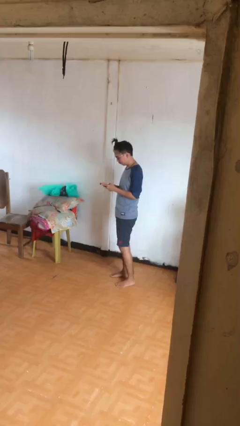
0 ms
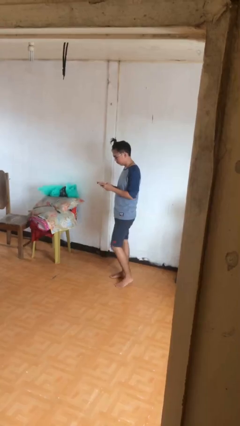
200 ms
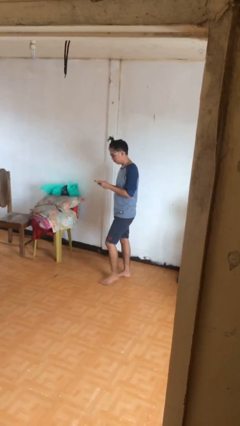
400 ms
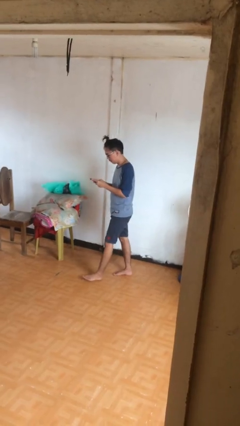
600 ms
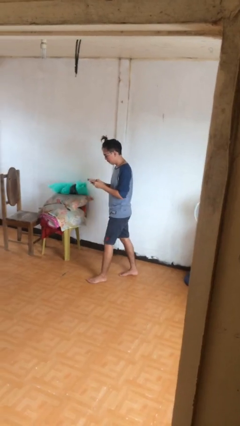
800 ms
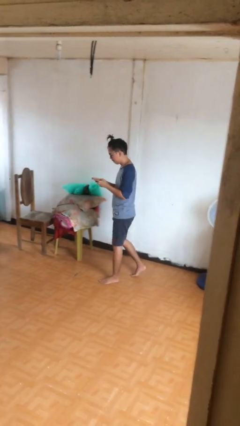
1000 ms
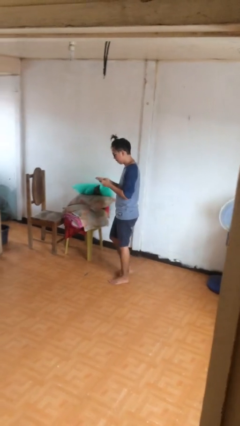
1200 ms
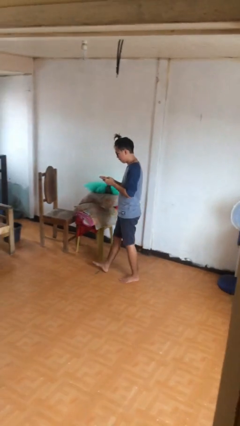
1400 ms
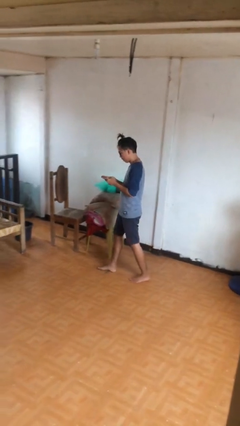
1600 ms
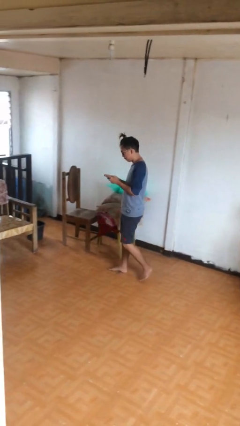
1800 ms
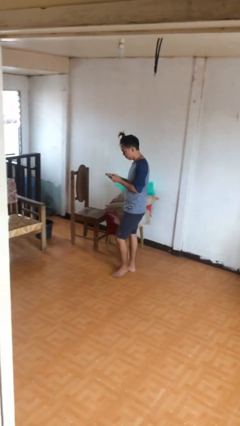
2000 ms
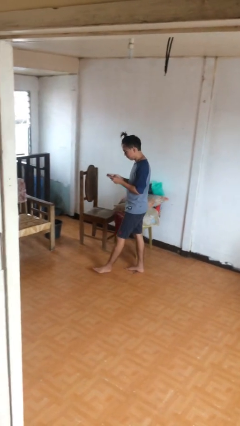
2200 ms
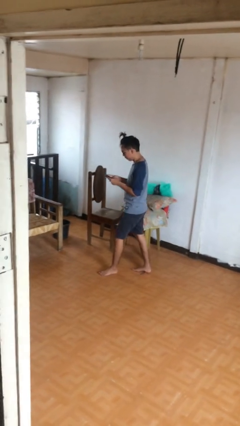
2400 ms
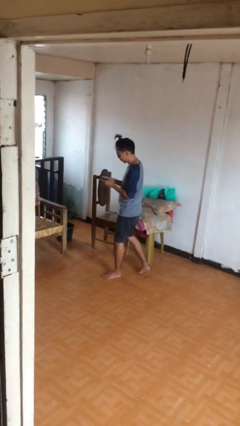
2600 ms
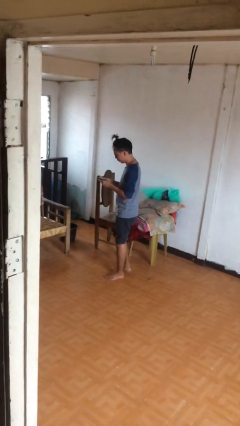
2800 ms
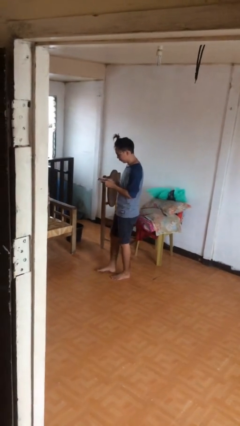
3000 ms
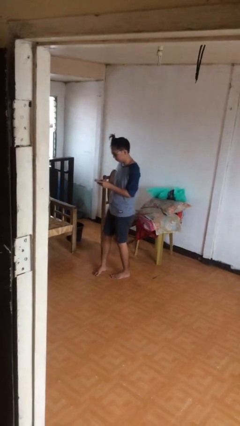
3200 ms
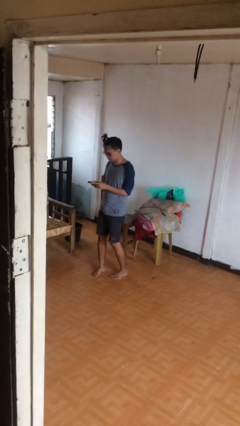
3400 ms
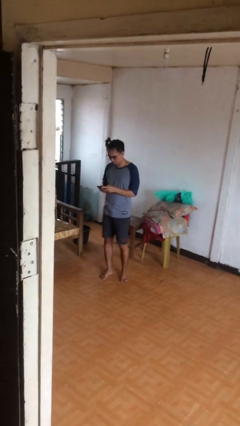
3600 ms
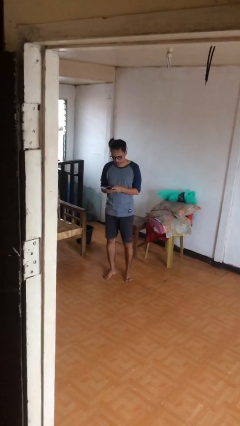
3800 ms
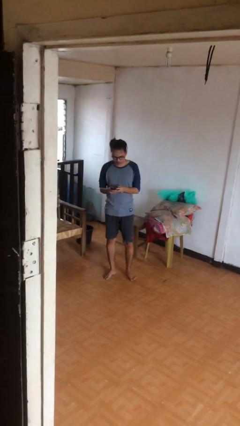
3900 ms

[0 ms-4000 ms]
person texts on phone

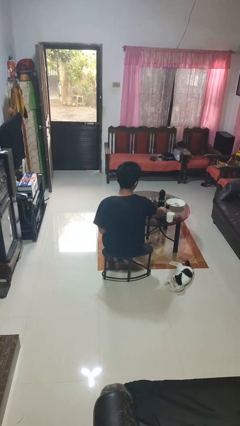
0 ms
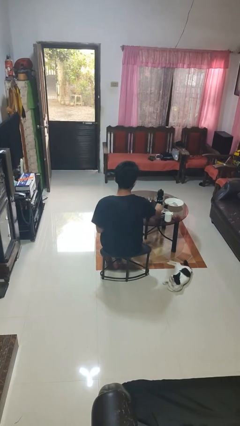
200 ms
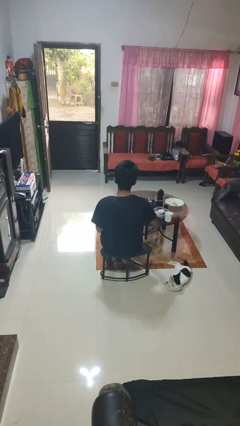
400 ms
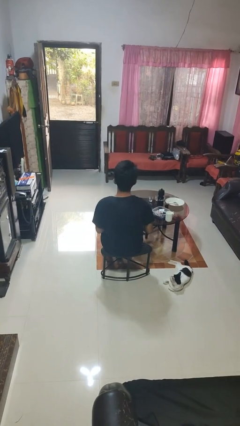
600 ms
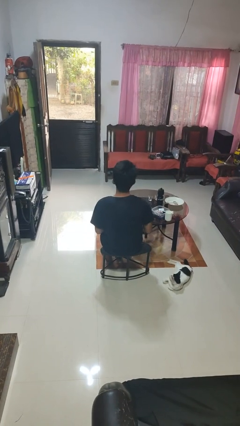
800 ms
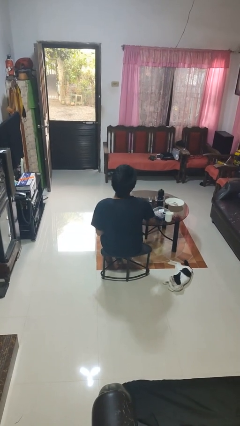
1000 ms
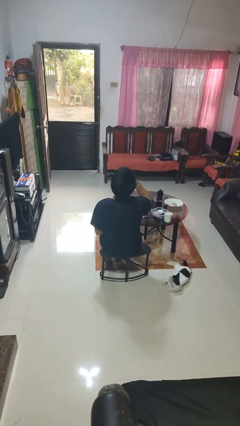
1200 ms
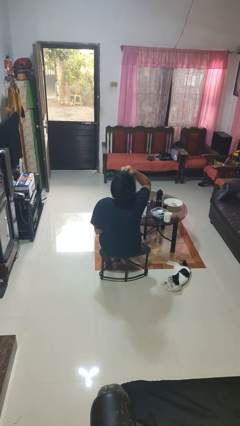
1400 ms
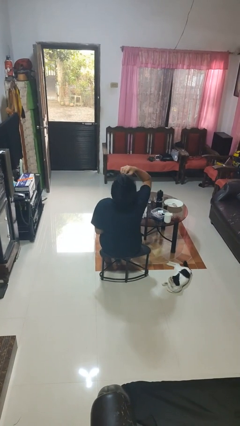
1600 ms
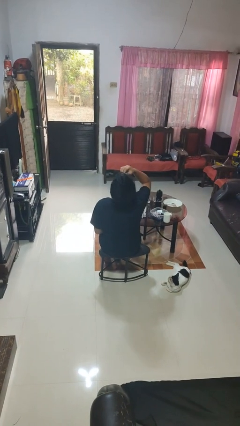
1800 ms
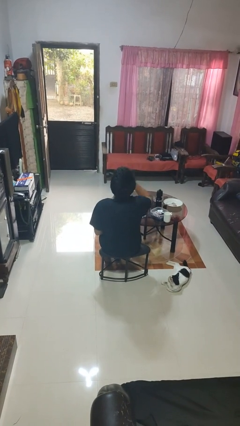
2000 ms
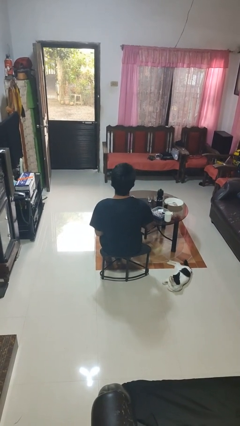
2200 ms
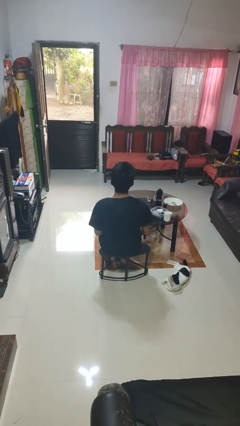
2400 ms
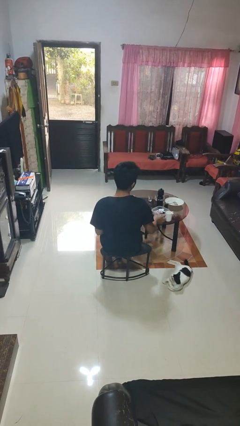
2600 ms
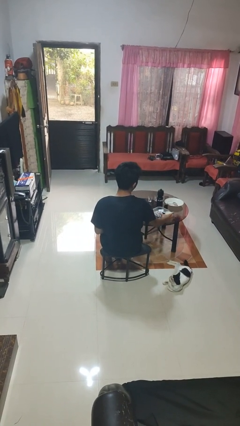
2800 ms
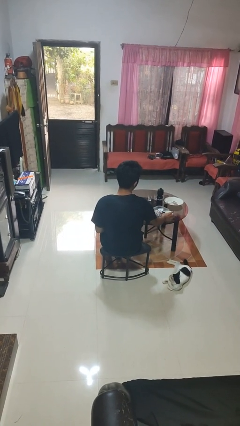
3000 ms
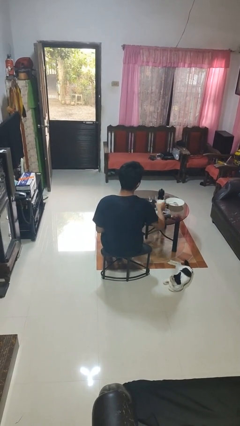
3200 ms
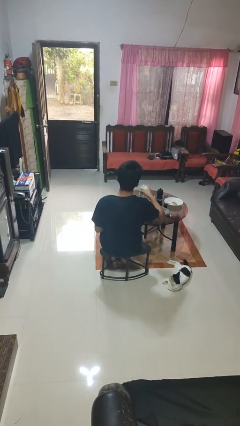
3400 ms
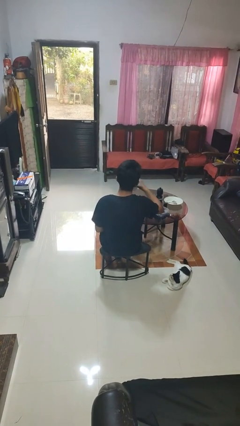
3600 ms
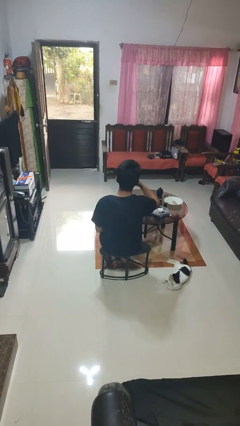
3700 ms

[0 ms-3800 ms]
person takes medicine pills

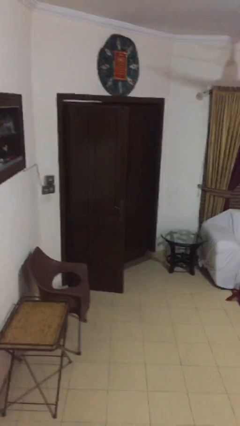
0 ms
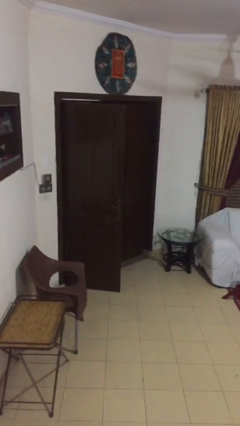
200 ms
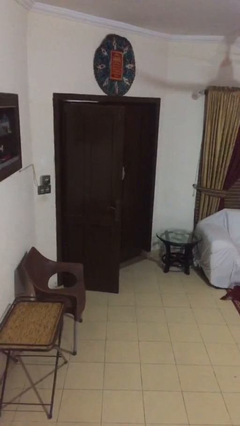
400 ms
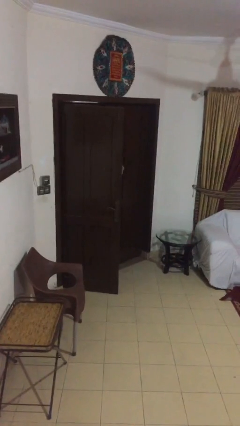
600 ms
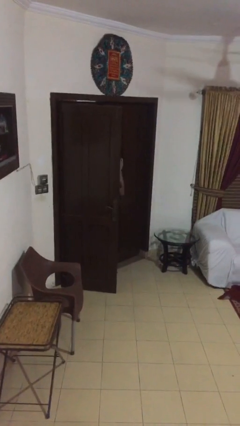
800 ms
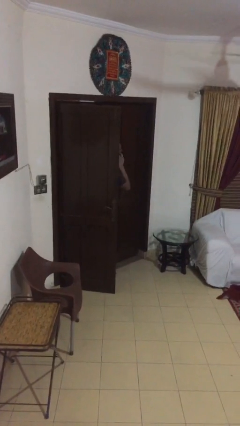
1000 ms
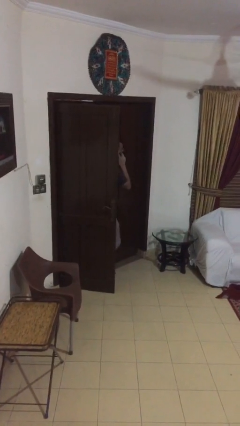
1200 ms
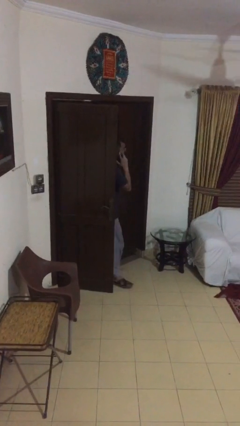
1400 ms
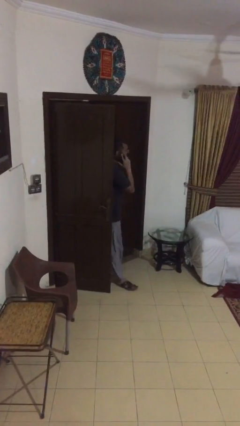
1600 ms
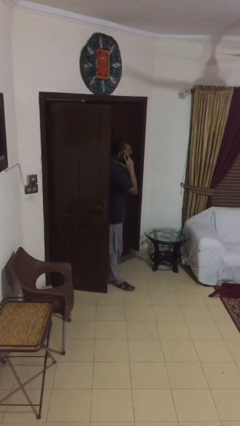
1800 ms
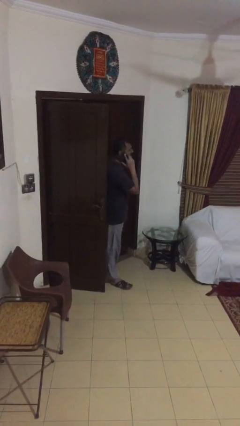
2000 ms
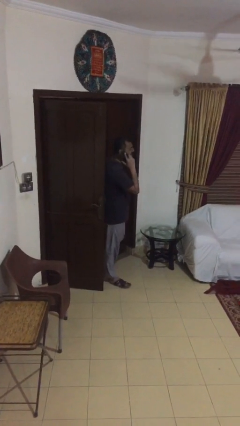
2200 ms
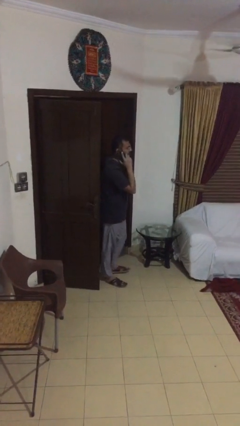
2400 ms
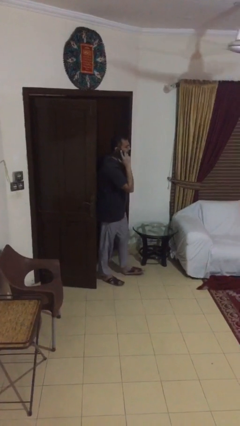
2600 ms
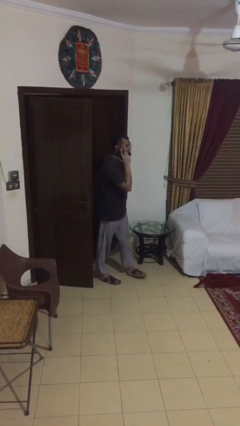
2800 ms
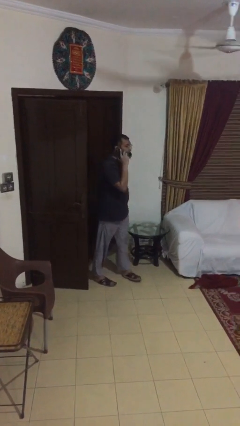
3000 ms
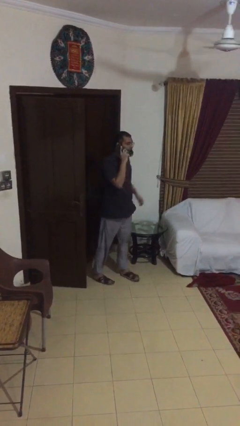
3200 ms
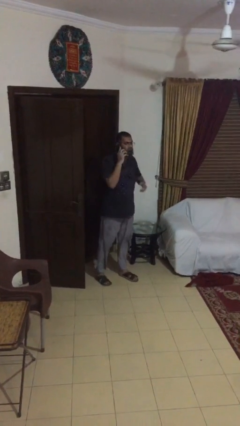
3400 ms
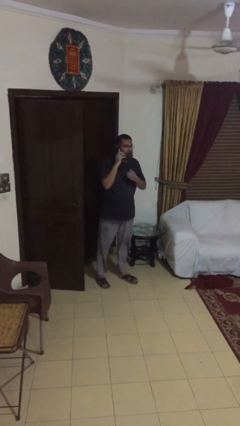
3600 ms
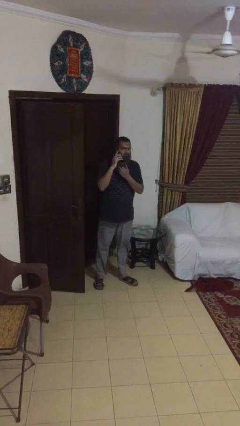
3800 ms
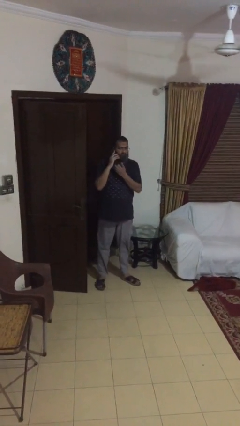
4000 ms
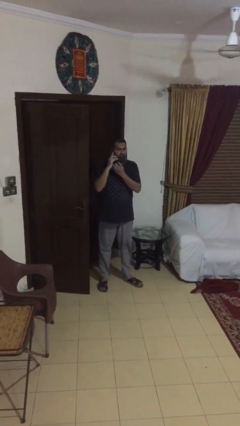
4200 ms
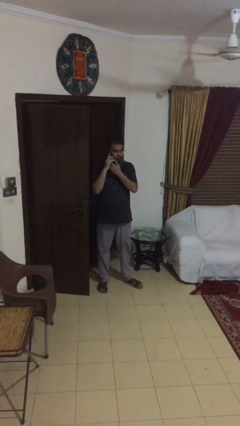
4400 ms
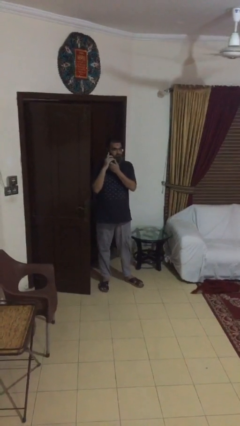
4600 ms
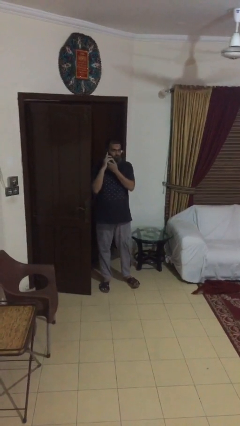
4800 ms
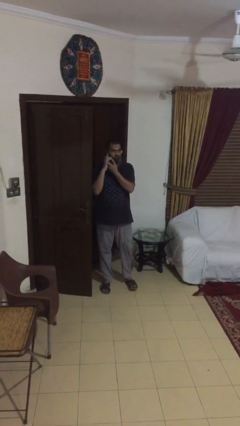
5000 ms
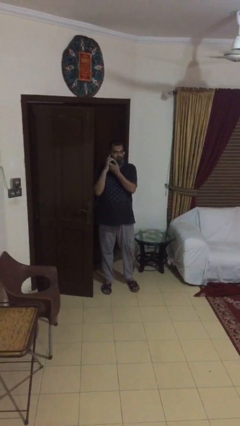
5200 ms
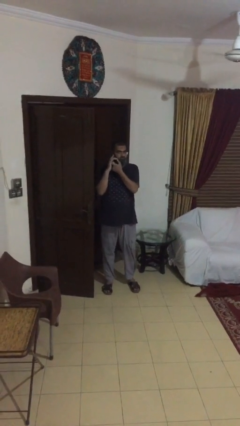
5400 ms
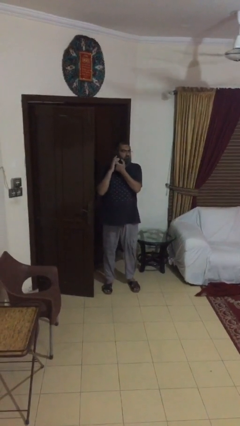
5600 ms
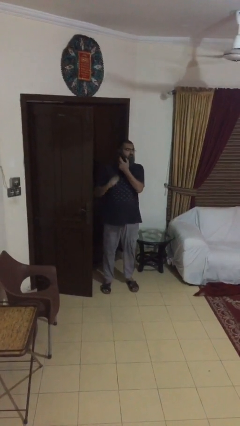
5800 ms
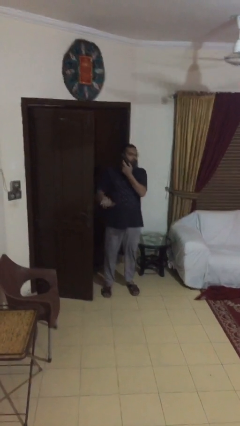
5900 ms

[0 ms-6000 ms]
person enters scene through structure

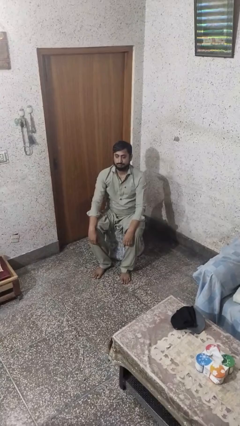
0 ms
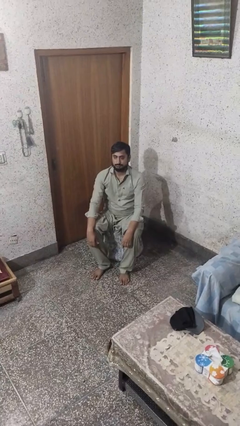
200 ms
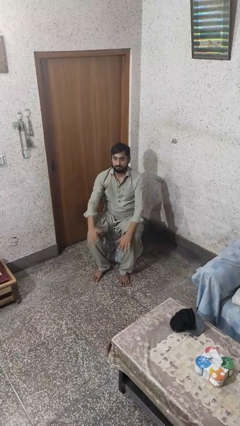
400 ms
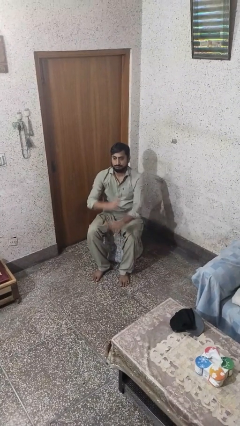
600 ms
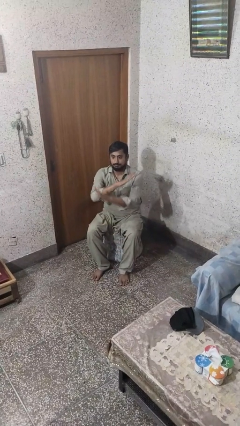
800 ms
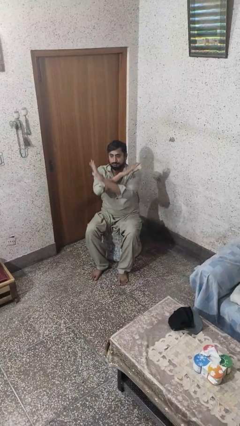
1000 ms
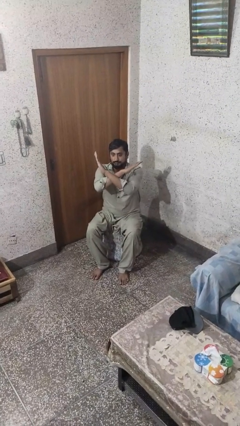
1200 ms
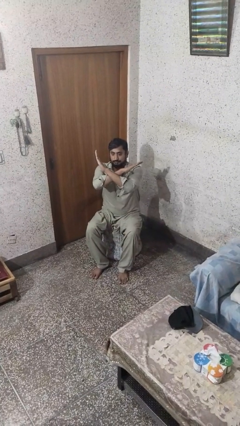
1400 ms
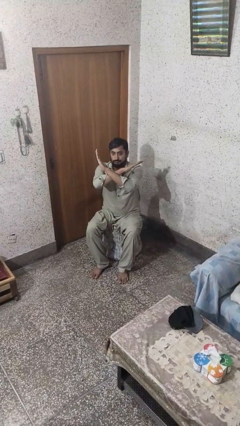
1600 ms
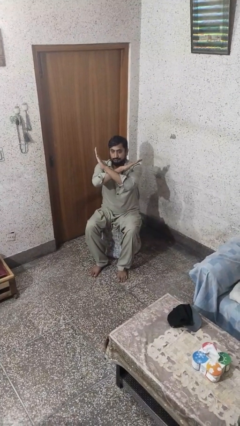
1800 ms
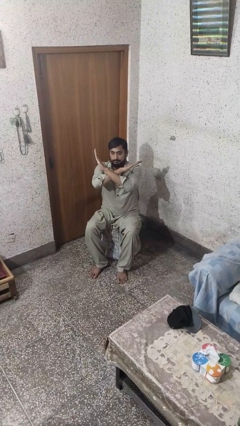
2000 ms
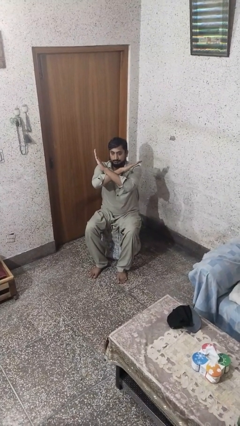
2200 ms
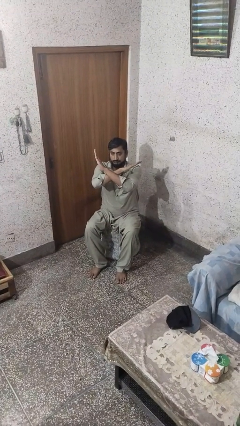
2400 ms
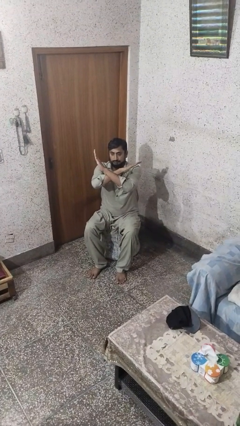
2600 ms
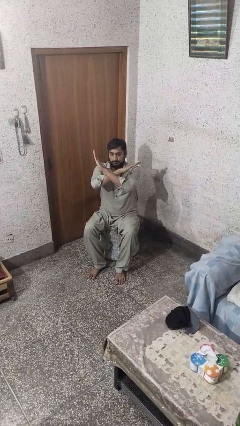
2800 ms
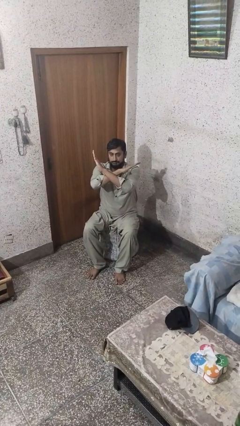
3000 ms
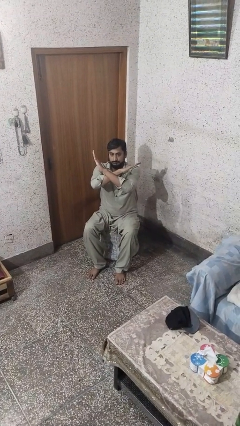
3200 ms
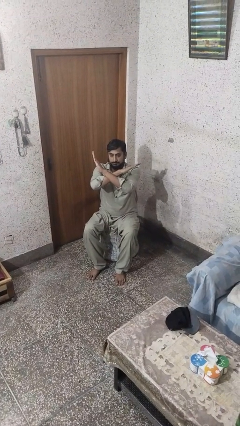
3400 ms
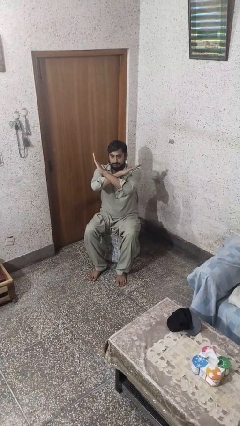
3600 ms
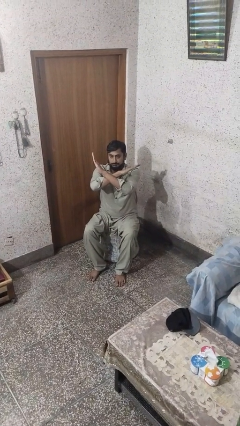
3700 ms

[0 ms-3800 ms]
person gestures arms x

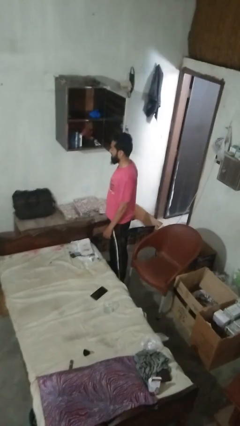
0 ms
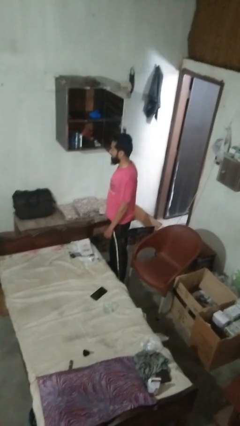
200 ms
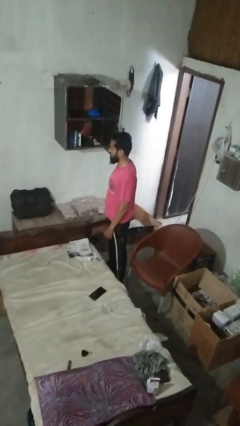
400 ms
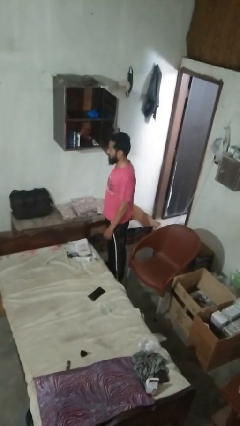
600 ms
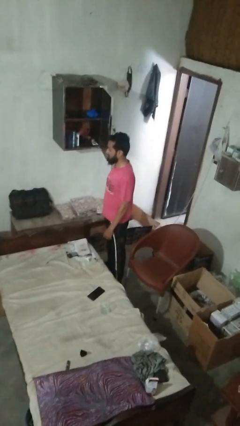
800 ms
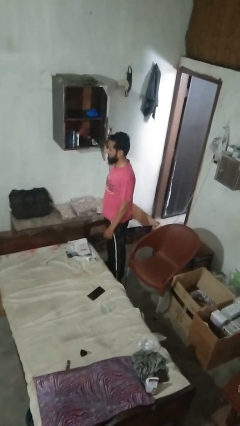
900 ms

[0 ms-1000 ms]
person opens closet door
